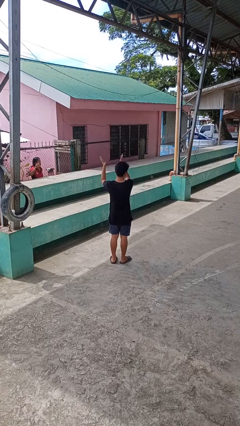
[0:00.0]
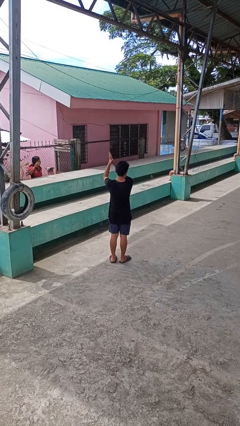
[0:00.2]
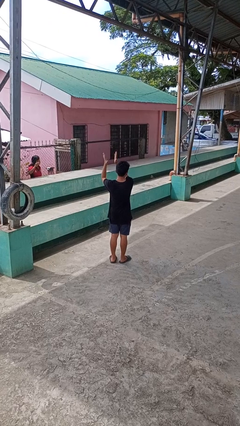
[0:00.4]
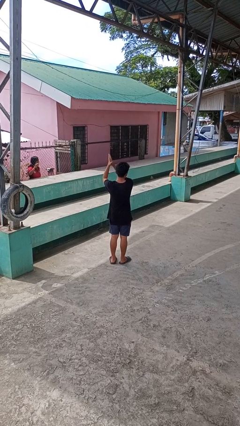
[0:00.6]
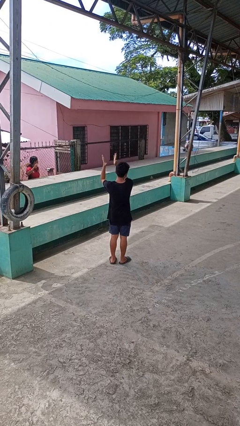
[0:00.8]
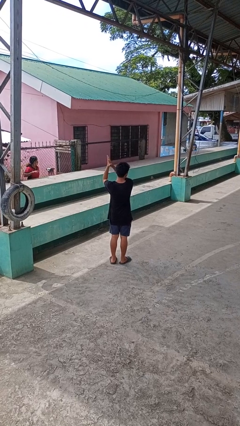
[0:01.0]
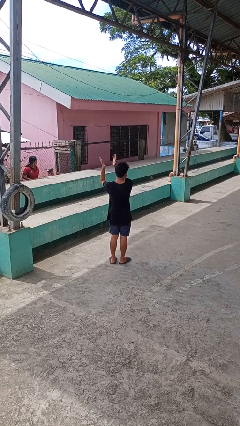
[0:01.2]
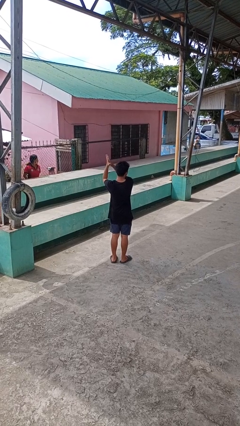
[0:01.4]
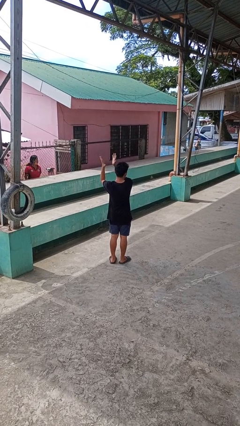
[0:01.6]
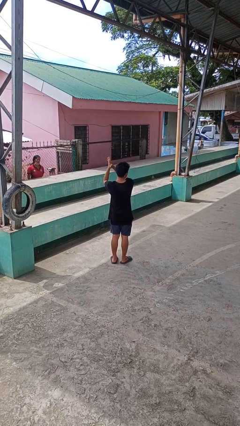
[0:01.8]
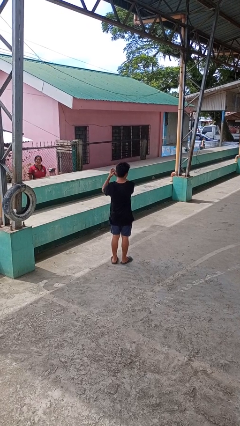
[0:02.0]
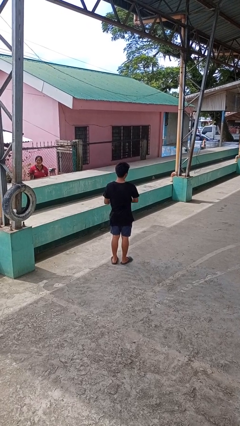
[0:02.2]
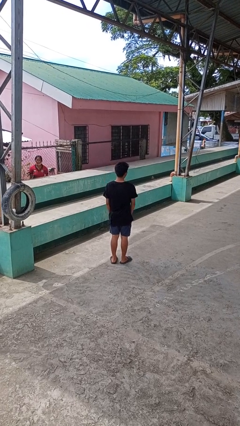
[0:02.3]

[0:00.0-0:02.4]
person claps hands

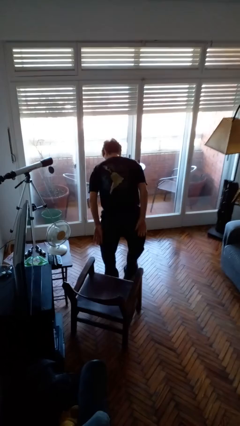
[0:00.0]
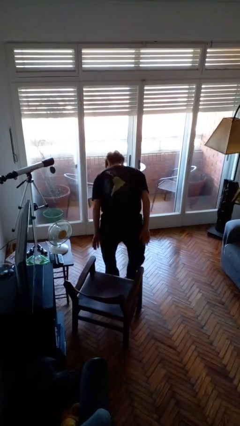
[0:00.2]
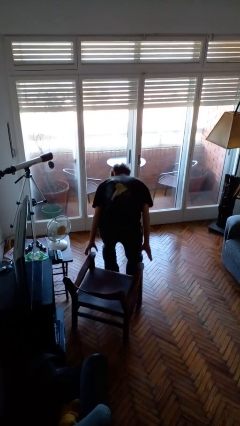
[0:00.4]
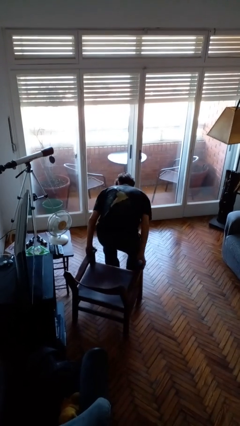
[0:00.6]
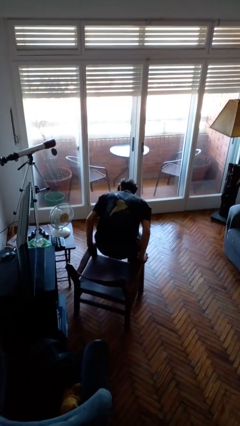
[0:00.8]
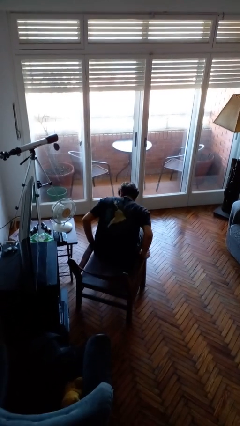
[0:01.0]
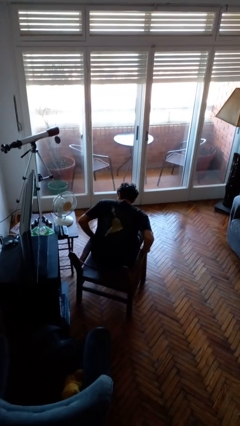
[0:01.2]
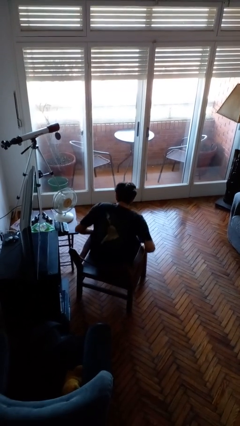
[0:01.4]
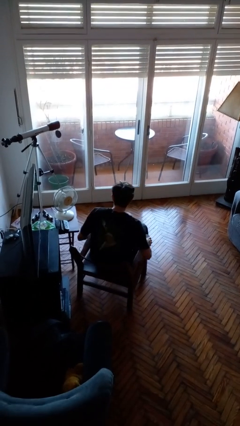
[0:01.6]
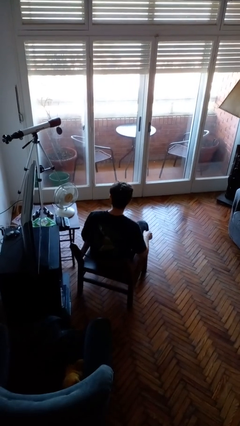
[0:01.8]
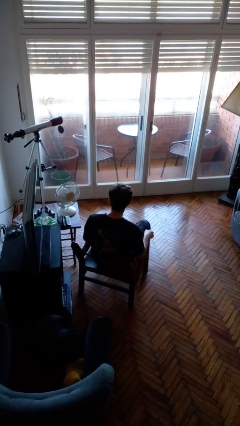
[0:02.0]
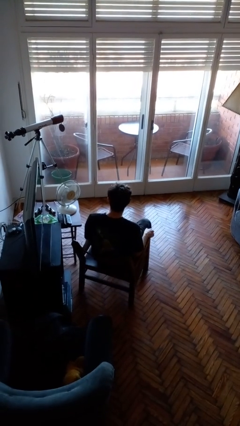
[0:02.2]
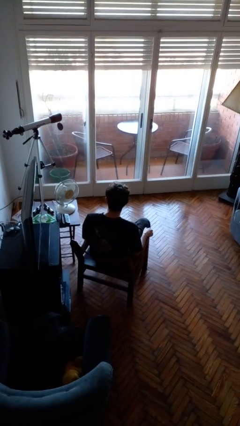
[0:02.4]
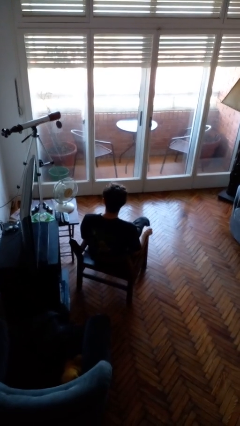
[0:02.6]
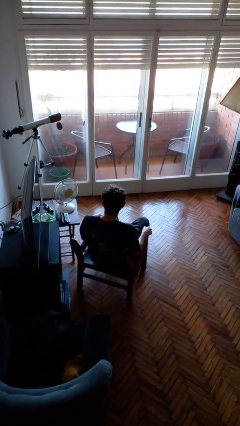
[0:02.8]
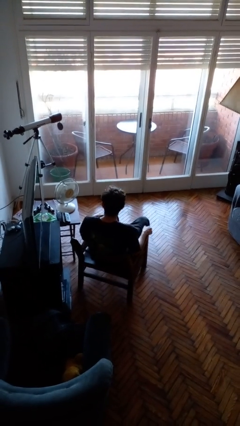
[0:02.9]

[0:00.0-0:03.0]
person sits down

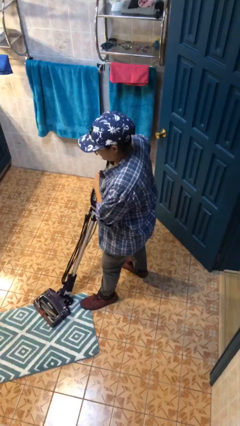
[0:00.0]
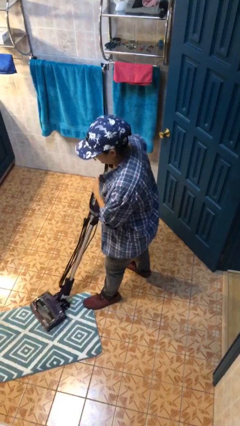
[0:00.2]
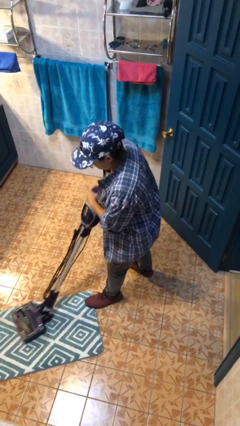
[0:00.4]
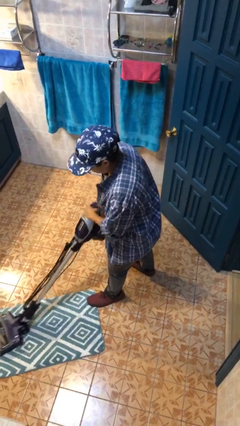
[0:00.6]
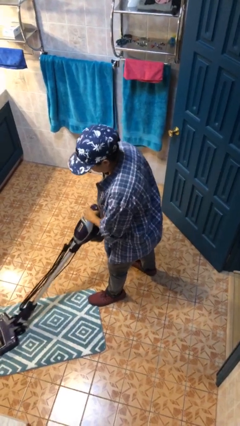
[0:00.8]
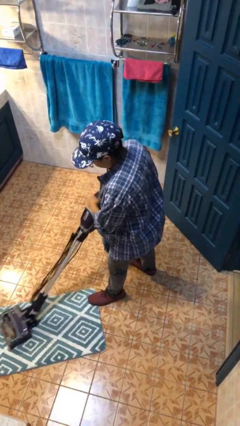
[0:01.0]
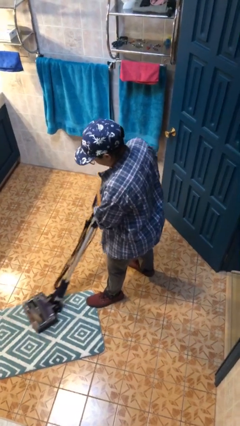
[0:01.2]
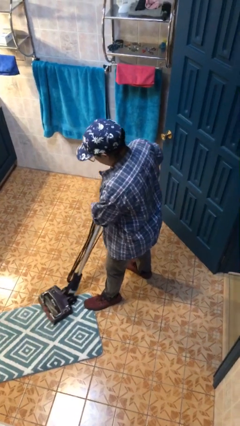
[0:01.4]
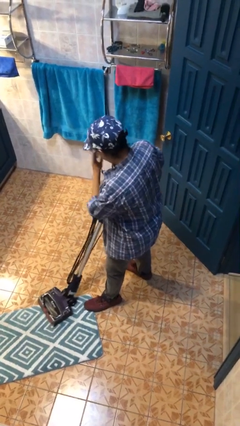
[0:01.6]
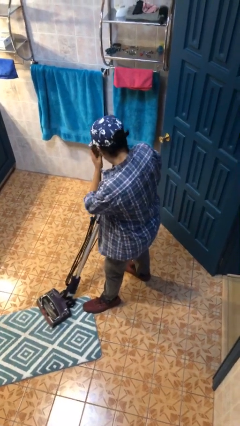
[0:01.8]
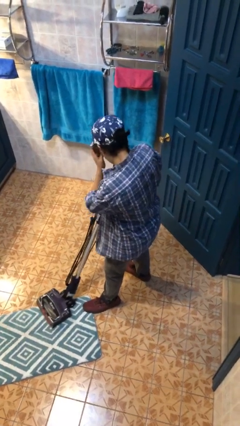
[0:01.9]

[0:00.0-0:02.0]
person vacuums carpet

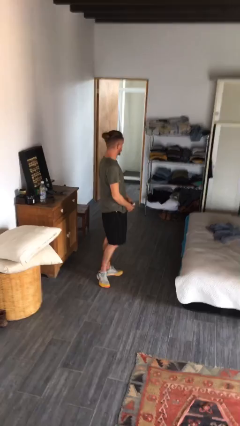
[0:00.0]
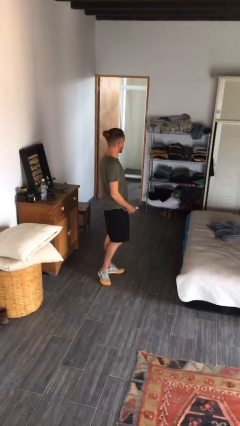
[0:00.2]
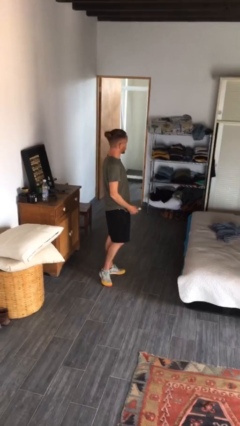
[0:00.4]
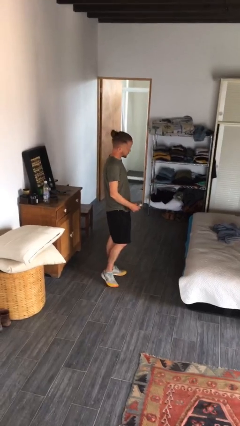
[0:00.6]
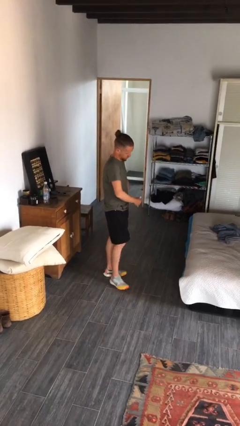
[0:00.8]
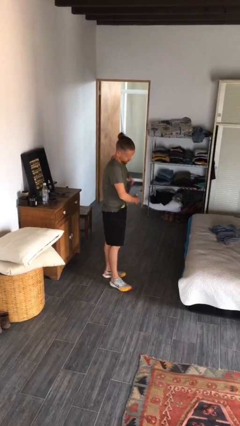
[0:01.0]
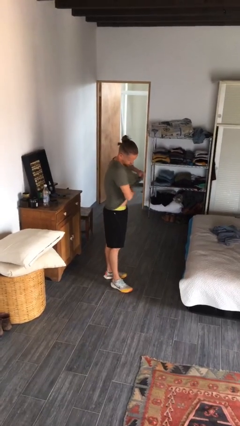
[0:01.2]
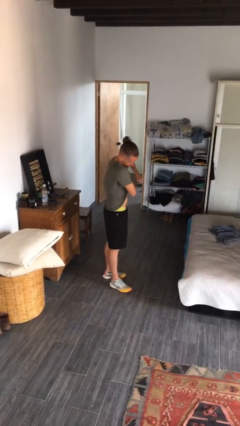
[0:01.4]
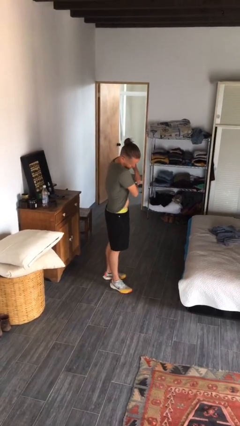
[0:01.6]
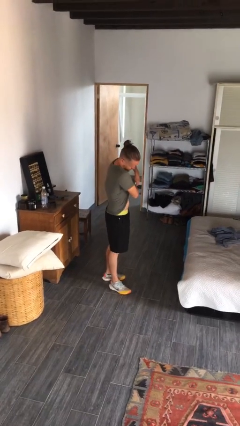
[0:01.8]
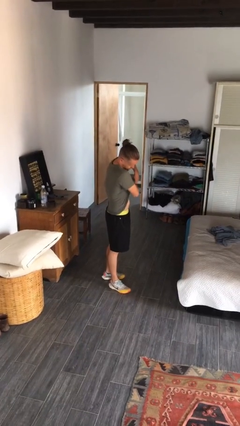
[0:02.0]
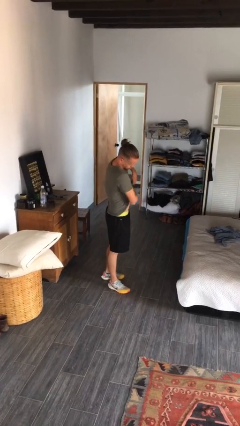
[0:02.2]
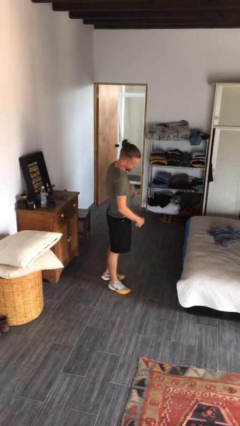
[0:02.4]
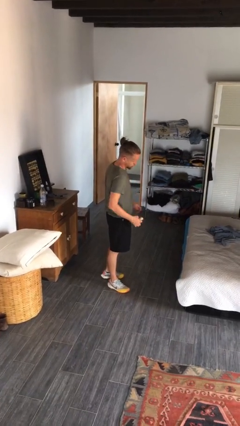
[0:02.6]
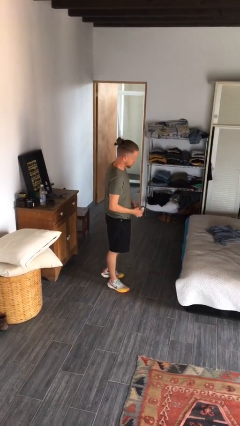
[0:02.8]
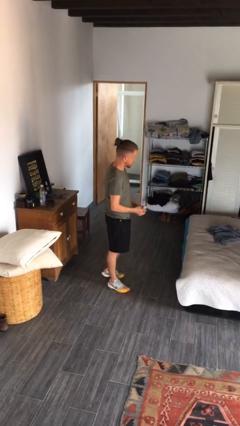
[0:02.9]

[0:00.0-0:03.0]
person applies deodorant

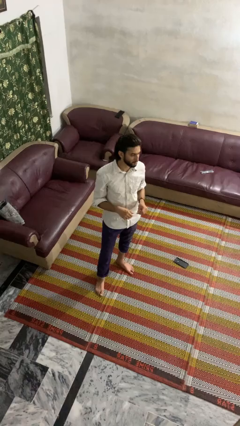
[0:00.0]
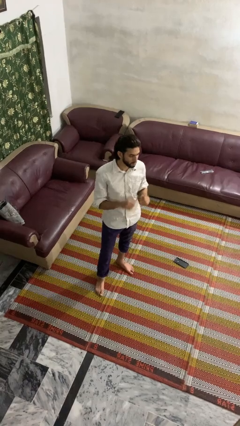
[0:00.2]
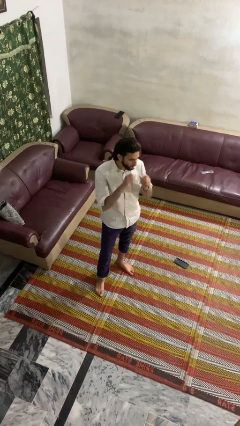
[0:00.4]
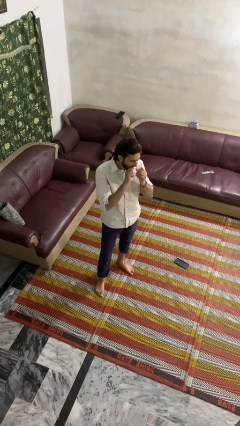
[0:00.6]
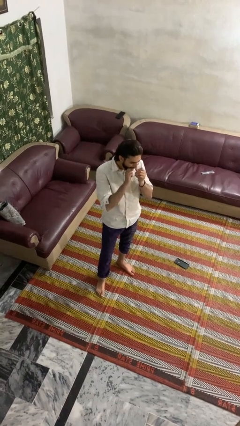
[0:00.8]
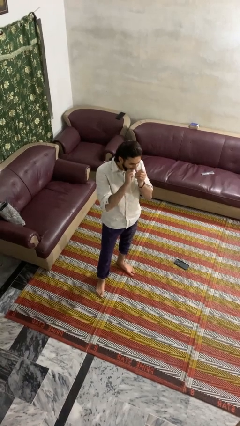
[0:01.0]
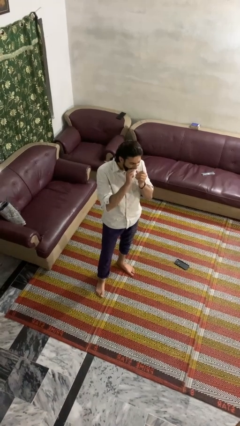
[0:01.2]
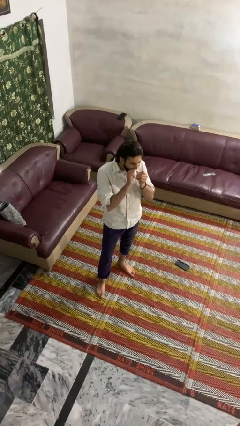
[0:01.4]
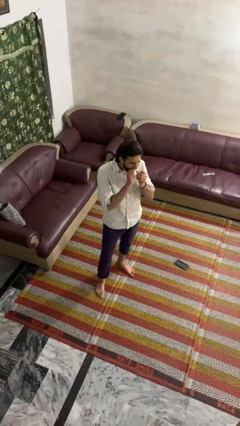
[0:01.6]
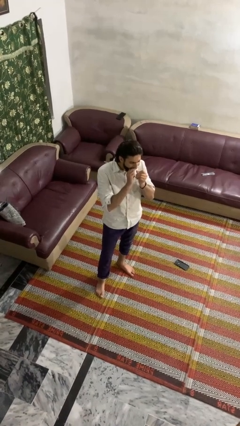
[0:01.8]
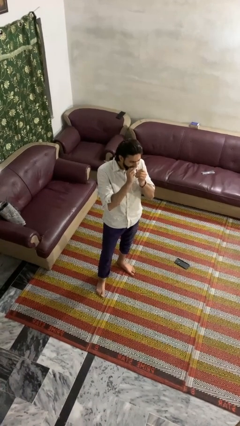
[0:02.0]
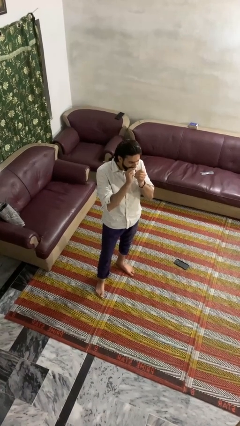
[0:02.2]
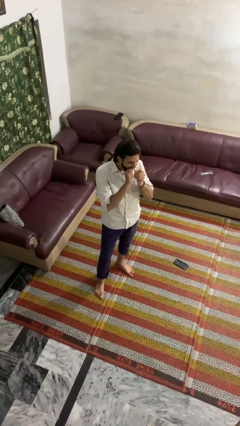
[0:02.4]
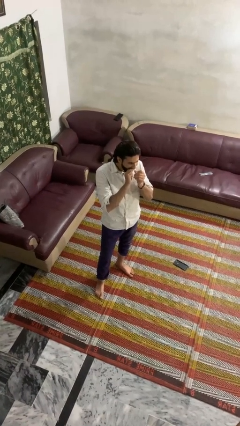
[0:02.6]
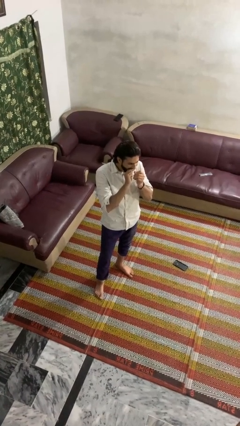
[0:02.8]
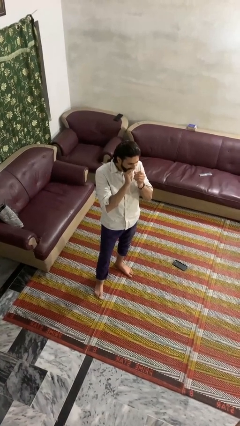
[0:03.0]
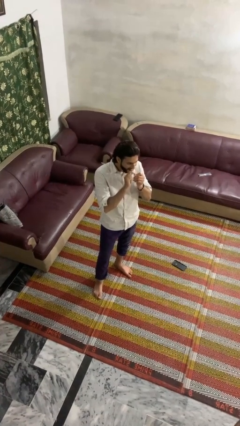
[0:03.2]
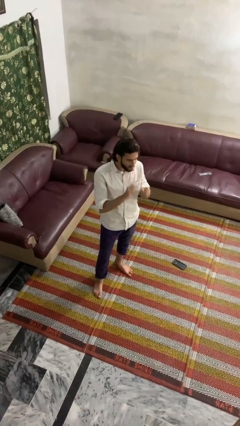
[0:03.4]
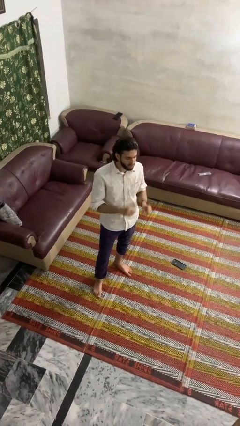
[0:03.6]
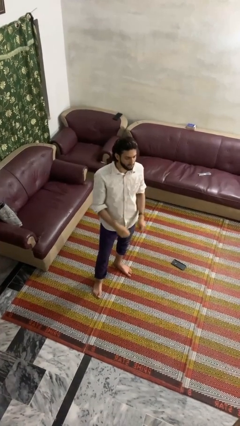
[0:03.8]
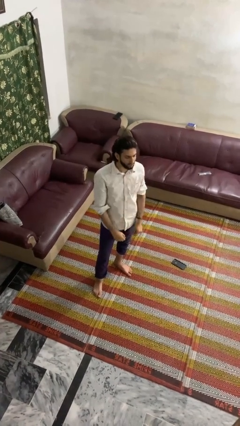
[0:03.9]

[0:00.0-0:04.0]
person flosses

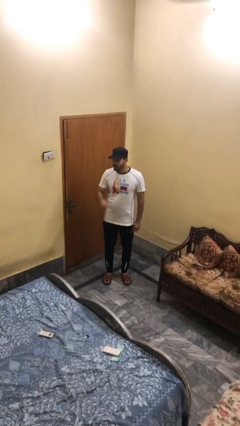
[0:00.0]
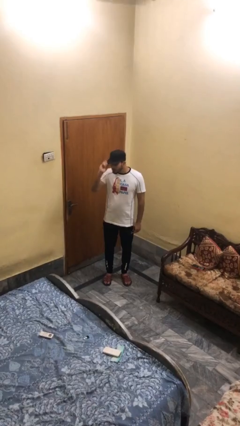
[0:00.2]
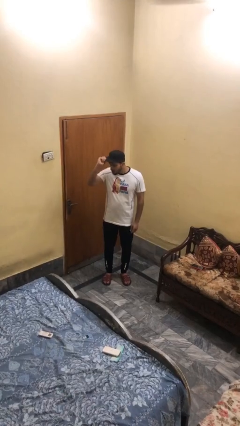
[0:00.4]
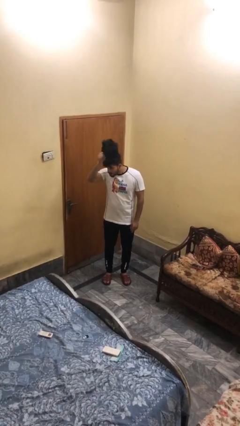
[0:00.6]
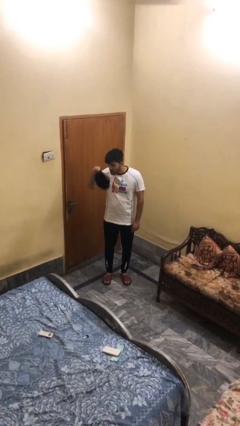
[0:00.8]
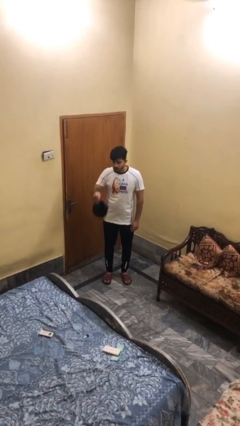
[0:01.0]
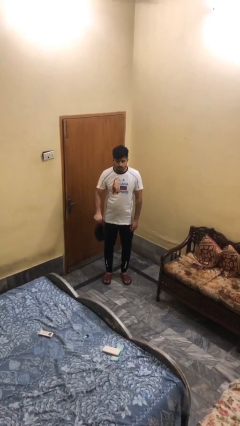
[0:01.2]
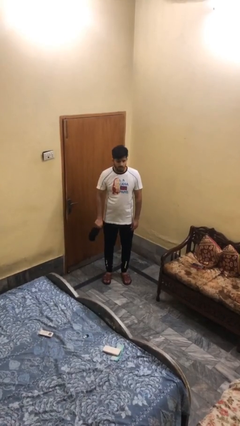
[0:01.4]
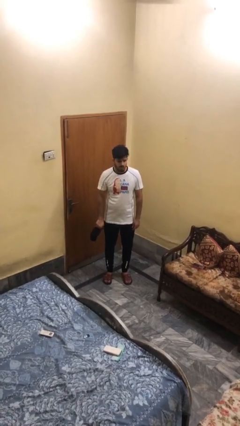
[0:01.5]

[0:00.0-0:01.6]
person takes off hat

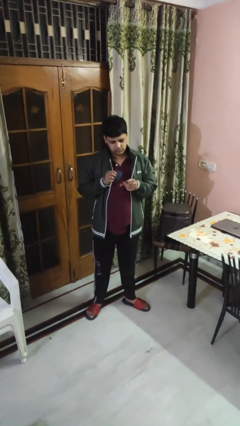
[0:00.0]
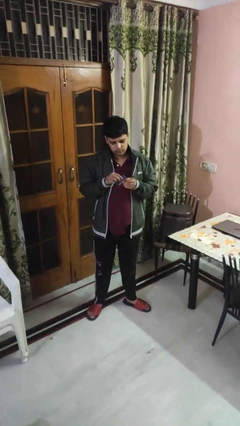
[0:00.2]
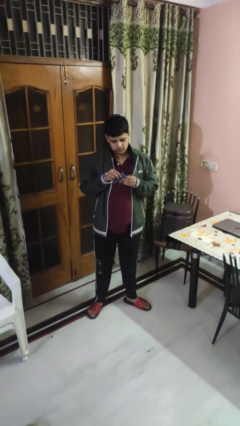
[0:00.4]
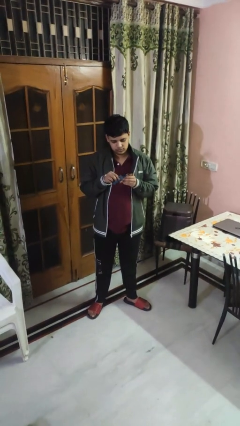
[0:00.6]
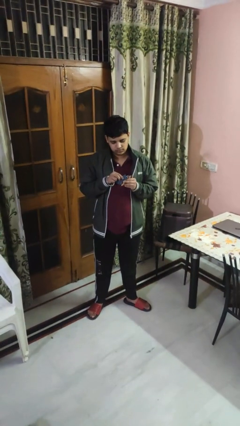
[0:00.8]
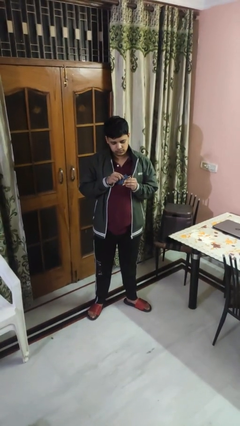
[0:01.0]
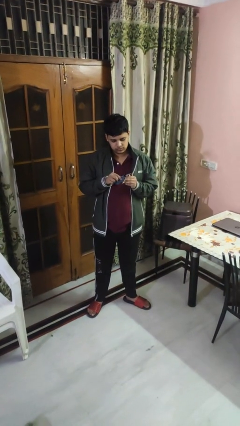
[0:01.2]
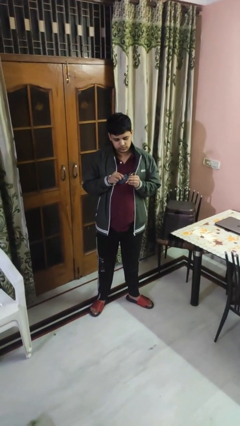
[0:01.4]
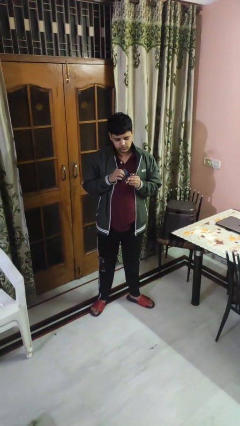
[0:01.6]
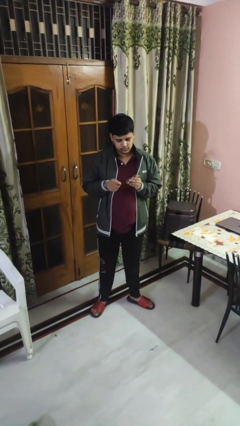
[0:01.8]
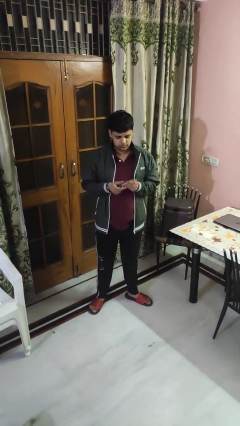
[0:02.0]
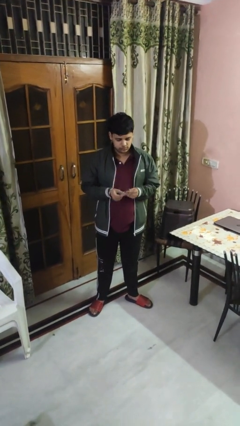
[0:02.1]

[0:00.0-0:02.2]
person cleans eyeglasses
